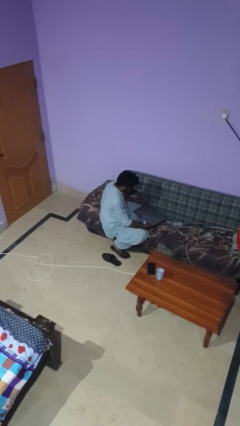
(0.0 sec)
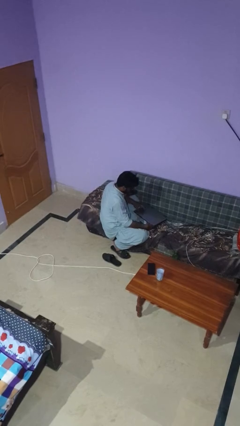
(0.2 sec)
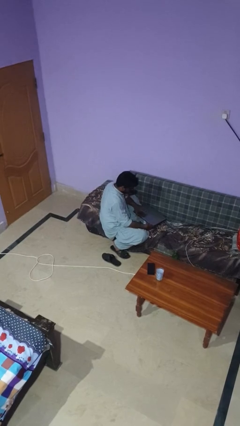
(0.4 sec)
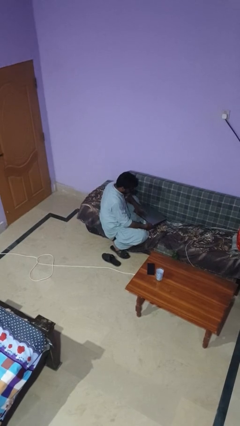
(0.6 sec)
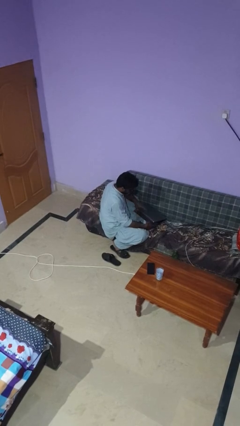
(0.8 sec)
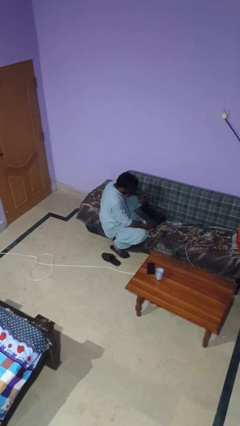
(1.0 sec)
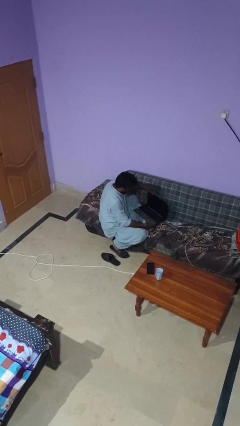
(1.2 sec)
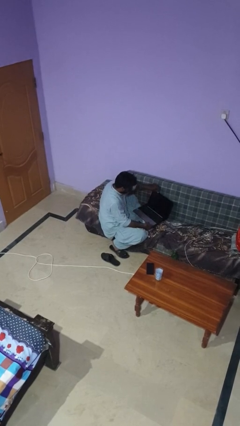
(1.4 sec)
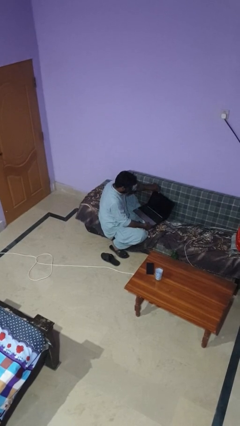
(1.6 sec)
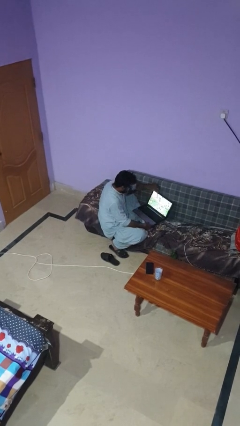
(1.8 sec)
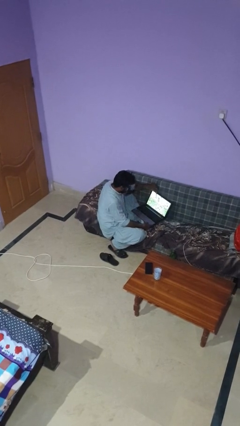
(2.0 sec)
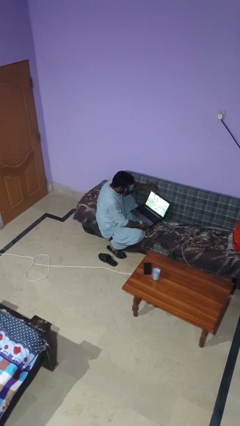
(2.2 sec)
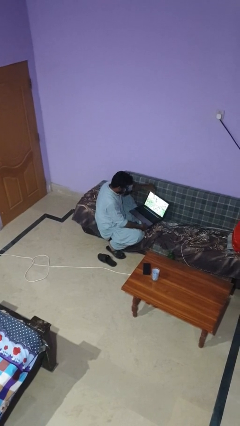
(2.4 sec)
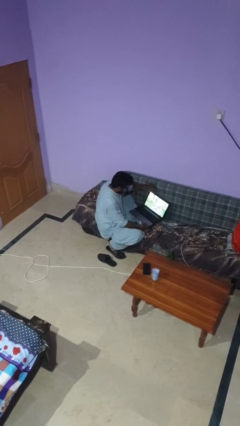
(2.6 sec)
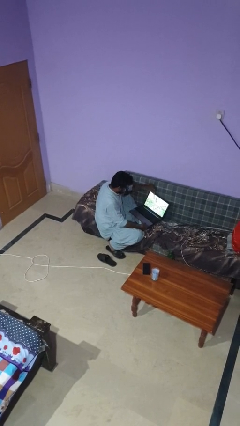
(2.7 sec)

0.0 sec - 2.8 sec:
person opens laptop

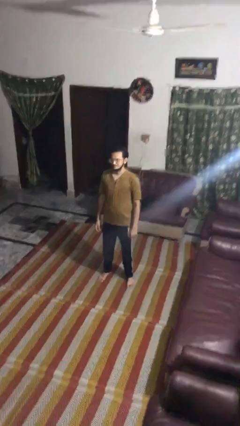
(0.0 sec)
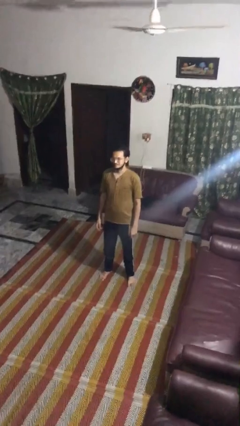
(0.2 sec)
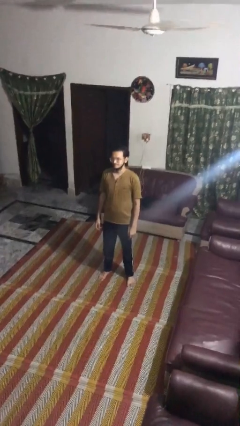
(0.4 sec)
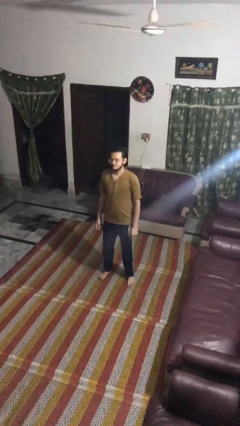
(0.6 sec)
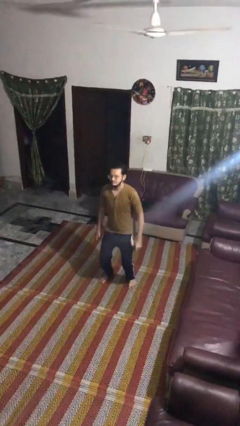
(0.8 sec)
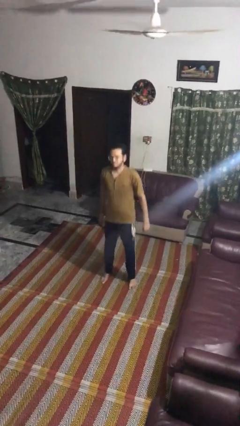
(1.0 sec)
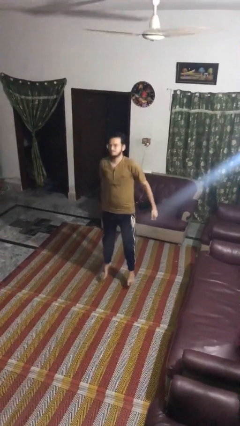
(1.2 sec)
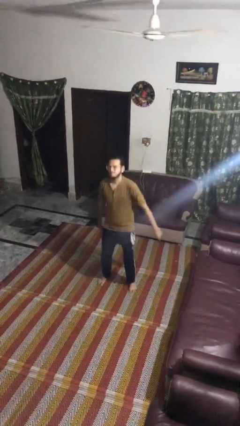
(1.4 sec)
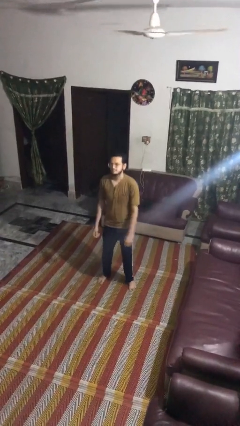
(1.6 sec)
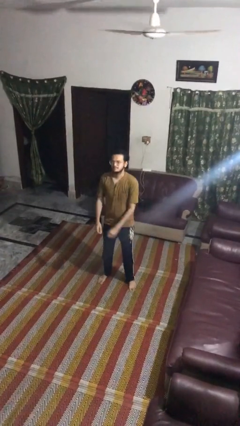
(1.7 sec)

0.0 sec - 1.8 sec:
person jumps

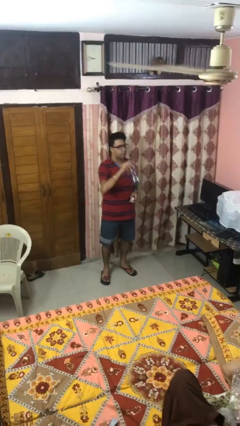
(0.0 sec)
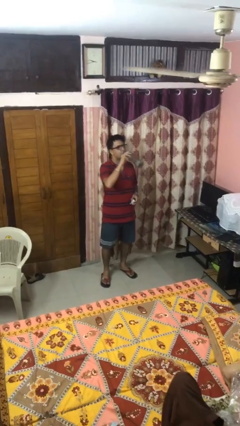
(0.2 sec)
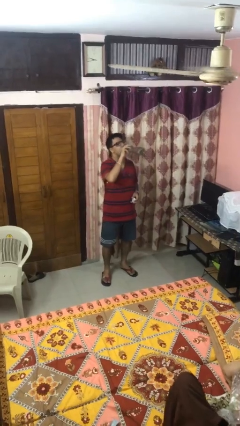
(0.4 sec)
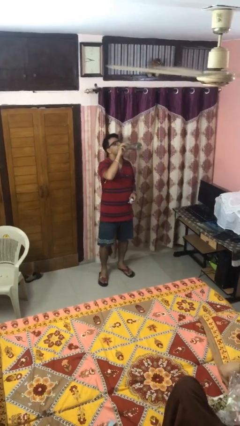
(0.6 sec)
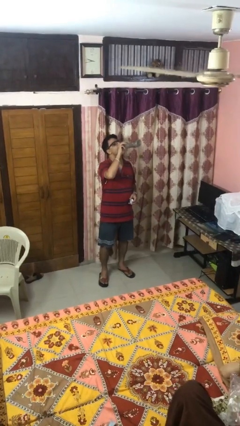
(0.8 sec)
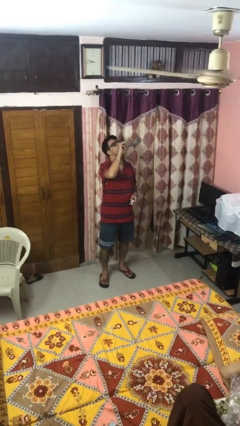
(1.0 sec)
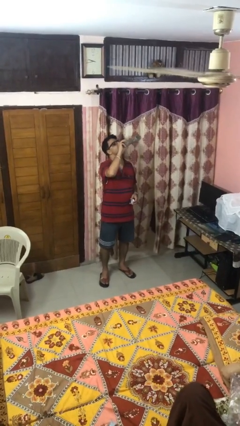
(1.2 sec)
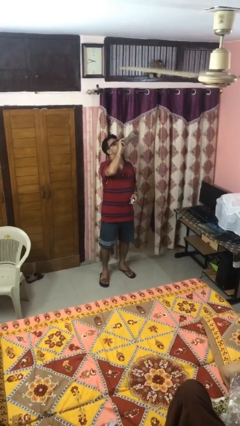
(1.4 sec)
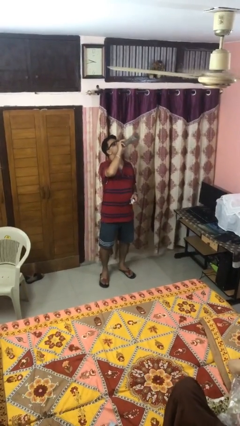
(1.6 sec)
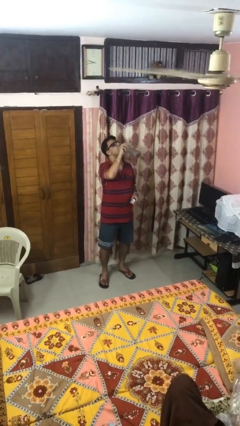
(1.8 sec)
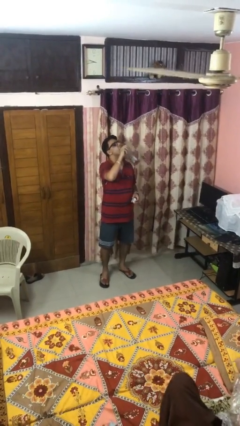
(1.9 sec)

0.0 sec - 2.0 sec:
person drinks from bottle

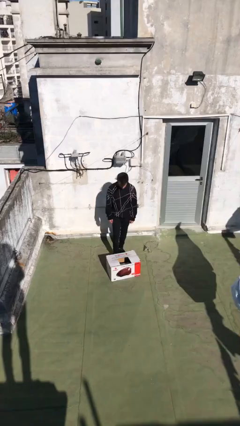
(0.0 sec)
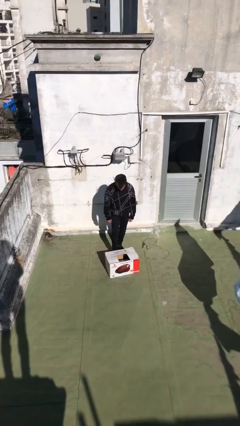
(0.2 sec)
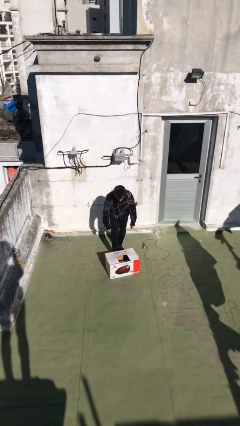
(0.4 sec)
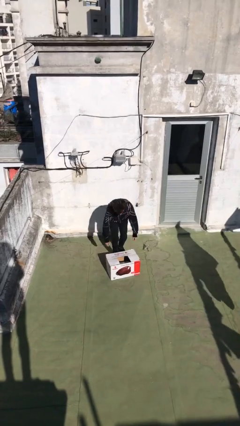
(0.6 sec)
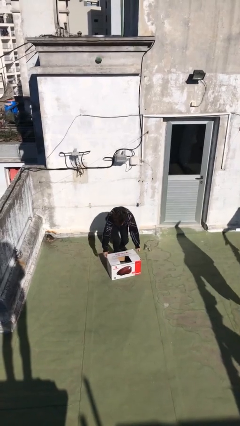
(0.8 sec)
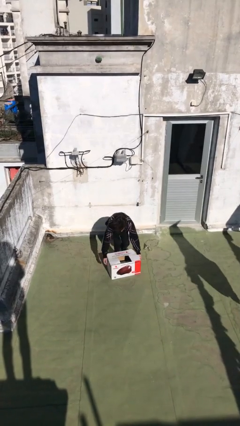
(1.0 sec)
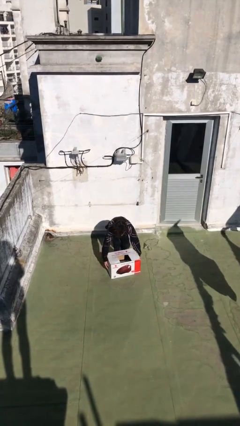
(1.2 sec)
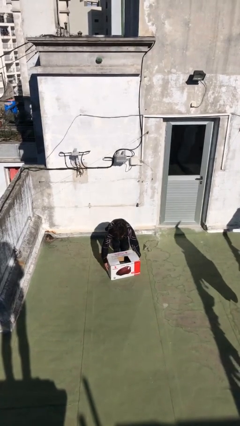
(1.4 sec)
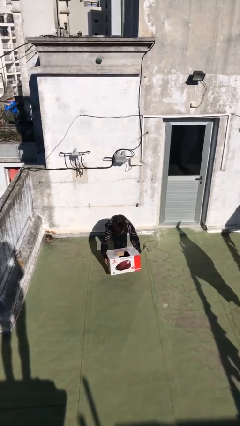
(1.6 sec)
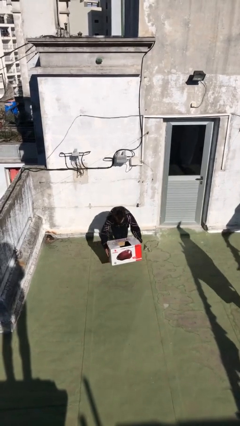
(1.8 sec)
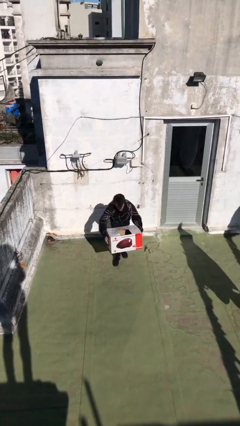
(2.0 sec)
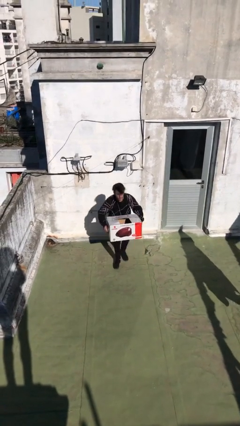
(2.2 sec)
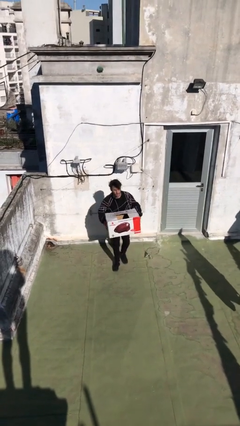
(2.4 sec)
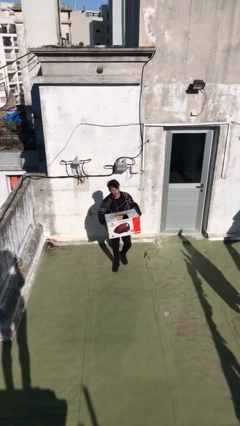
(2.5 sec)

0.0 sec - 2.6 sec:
person picks up object from floor

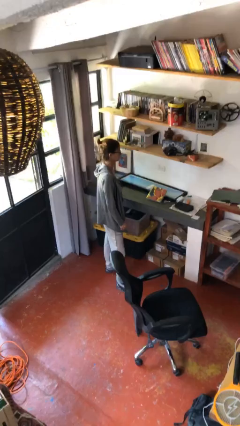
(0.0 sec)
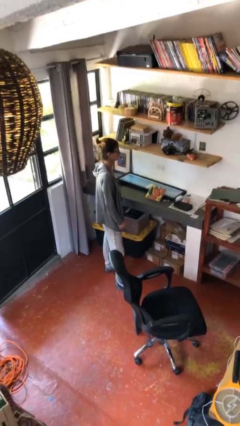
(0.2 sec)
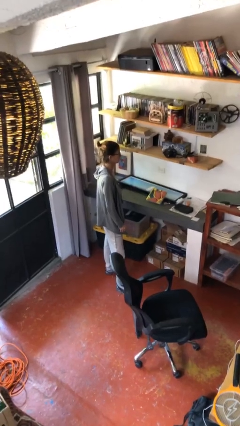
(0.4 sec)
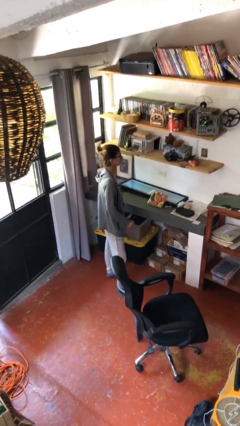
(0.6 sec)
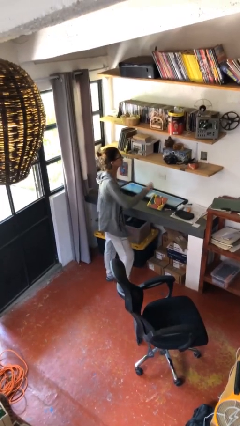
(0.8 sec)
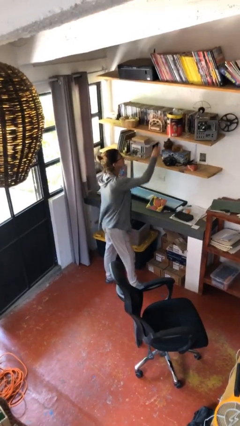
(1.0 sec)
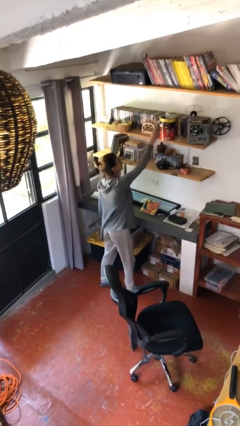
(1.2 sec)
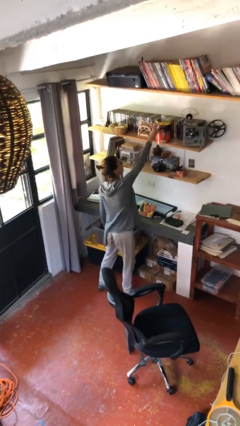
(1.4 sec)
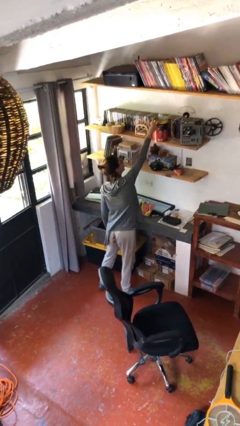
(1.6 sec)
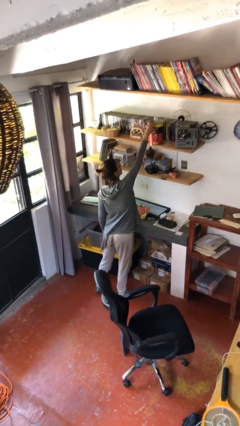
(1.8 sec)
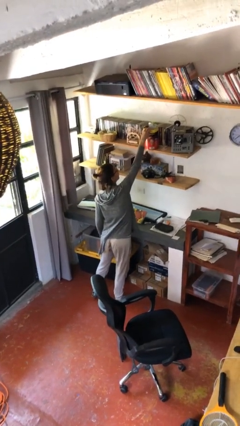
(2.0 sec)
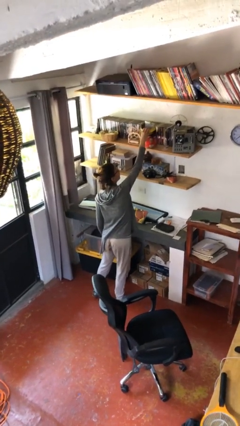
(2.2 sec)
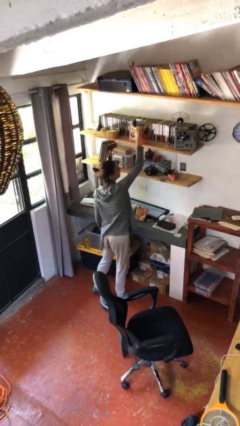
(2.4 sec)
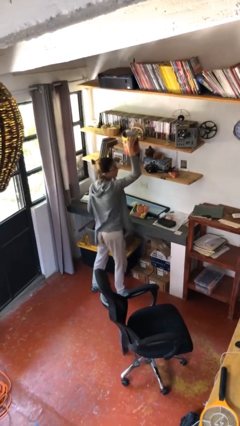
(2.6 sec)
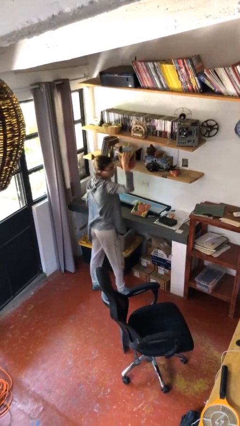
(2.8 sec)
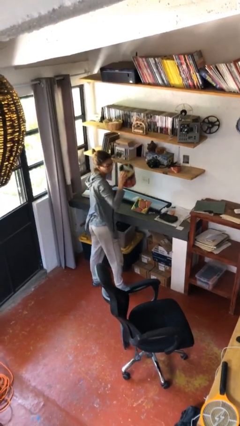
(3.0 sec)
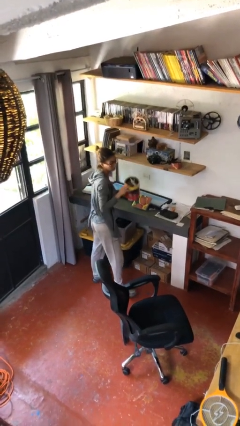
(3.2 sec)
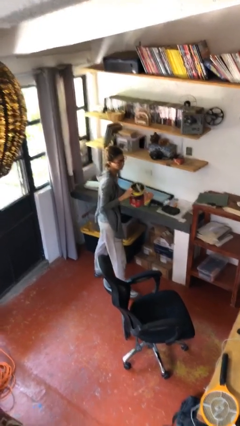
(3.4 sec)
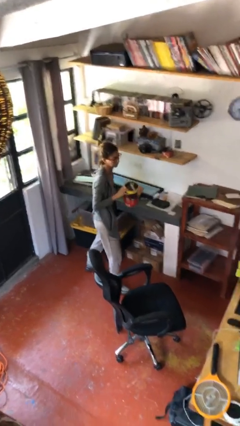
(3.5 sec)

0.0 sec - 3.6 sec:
person picks up object from shelf

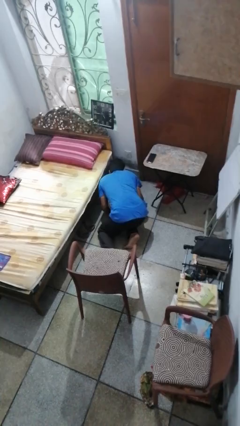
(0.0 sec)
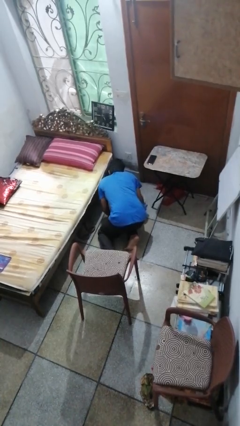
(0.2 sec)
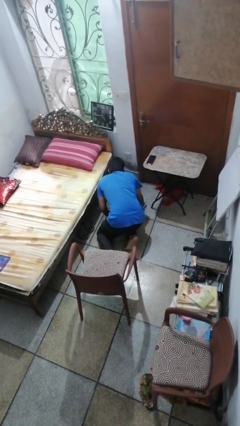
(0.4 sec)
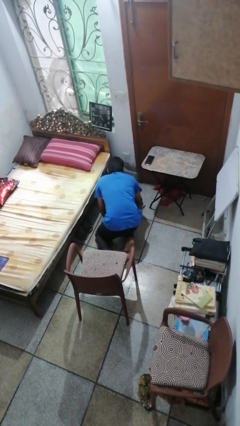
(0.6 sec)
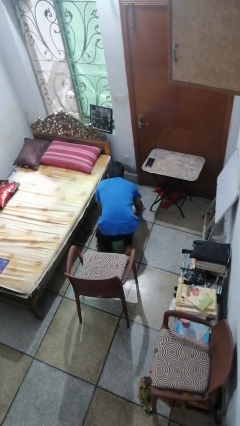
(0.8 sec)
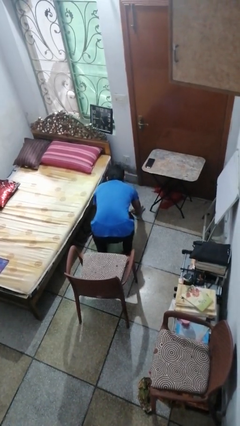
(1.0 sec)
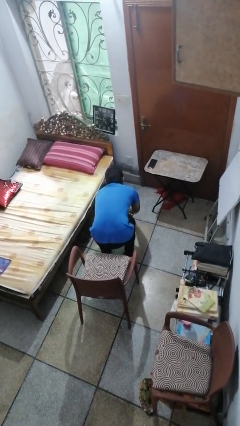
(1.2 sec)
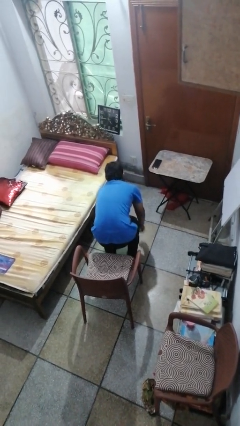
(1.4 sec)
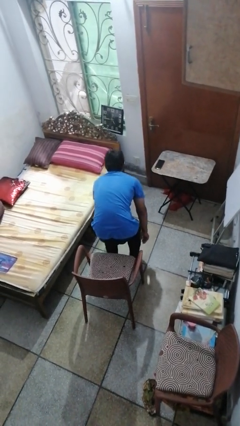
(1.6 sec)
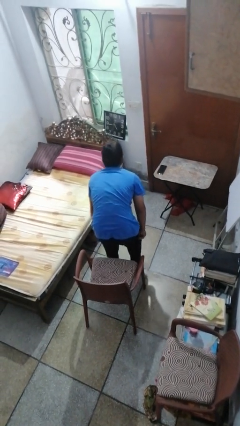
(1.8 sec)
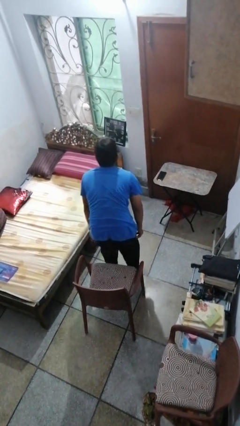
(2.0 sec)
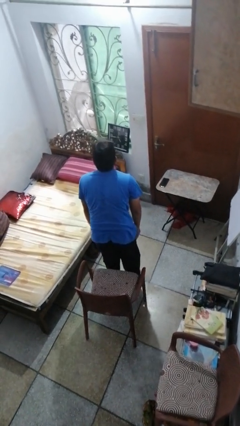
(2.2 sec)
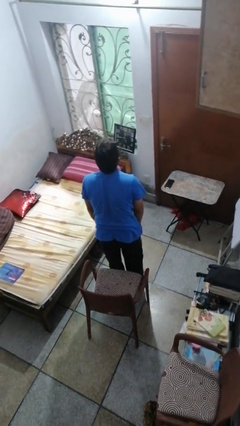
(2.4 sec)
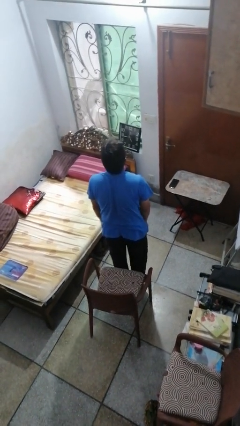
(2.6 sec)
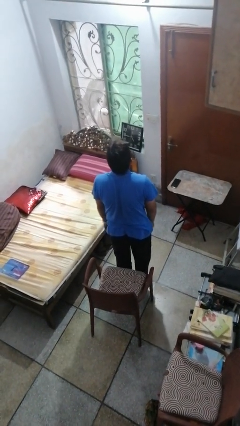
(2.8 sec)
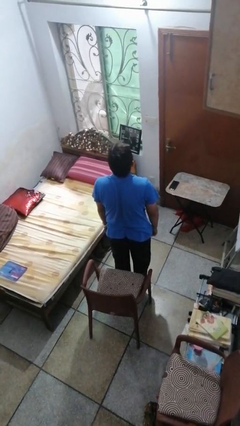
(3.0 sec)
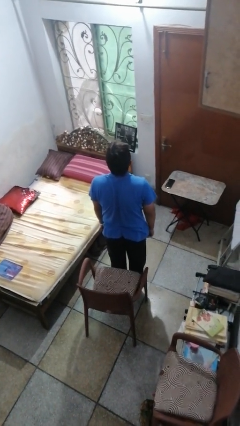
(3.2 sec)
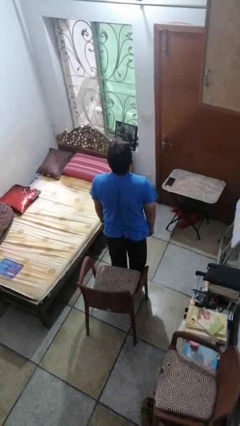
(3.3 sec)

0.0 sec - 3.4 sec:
person stands up from floor

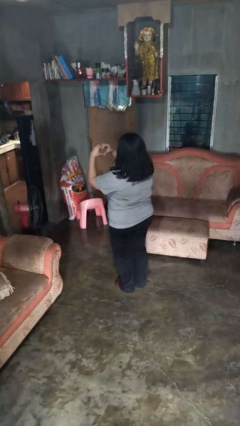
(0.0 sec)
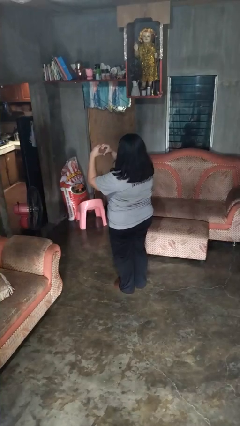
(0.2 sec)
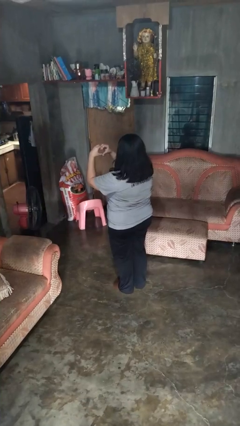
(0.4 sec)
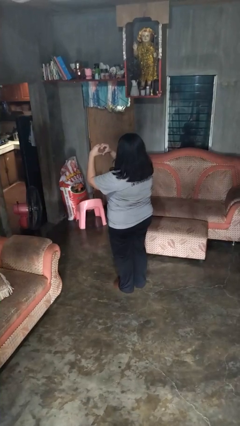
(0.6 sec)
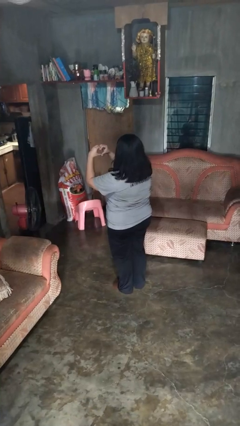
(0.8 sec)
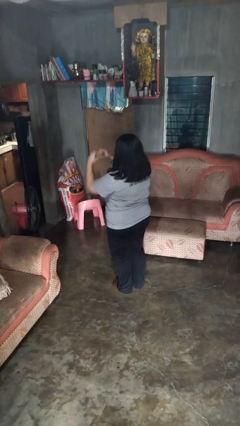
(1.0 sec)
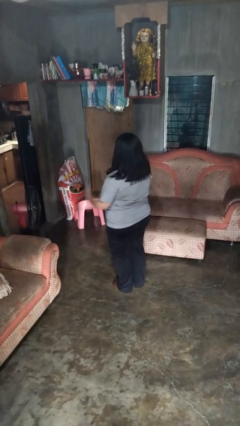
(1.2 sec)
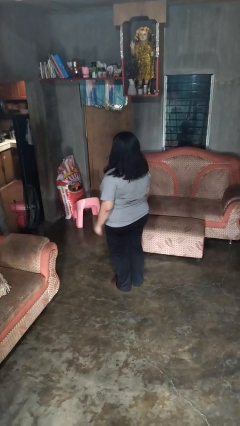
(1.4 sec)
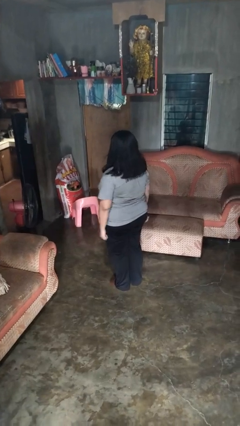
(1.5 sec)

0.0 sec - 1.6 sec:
person gestures heart
